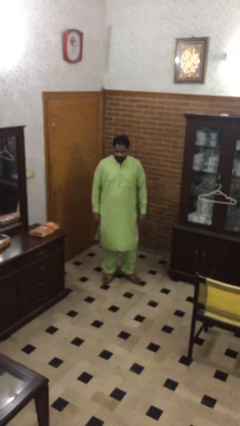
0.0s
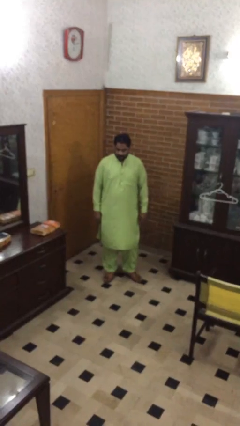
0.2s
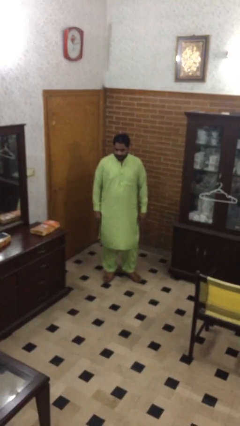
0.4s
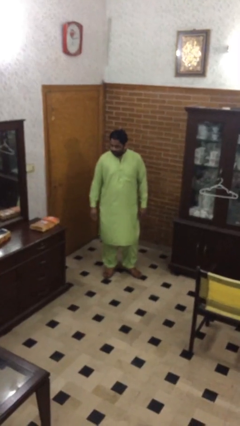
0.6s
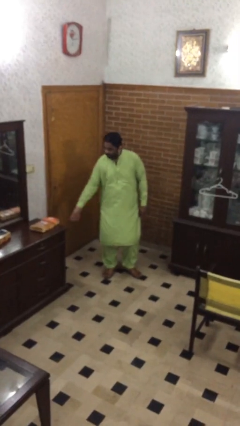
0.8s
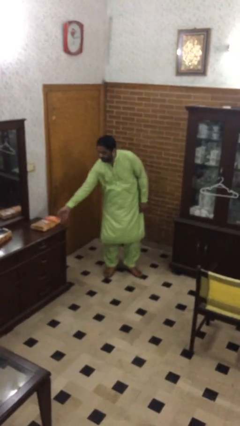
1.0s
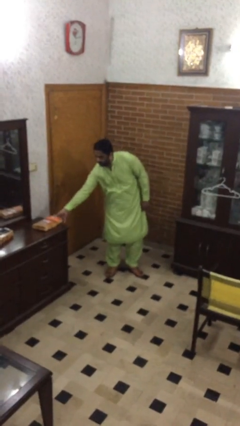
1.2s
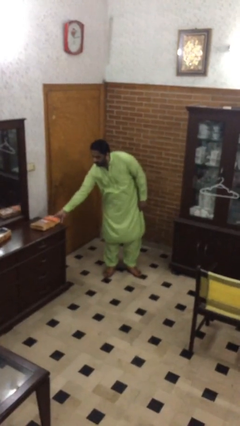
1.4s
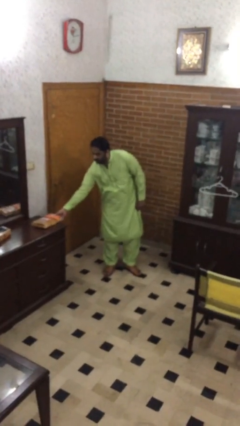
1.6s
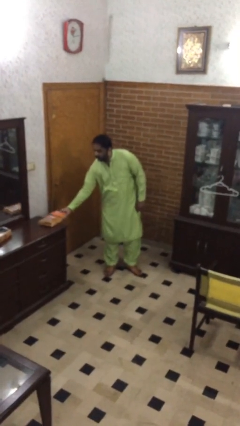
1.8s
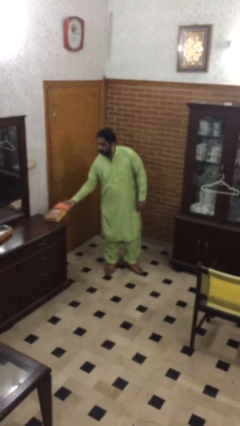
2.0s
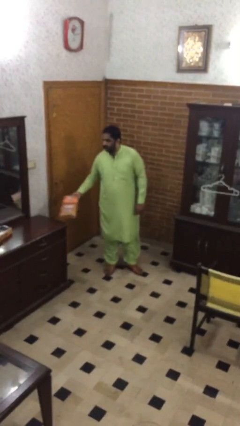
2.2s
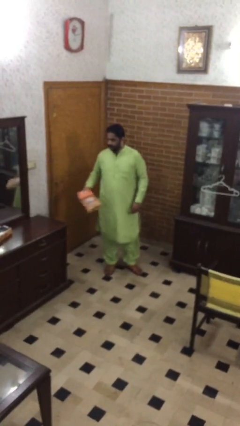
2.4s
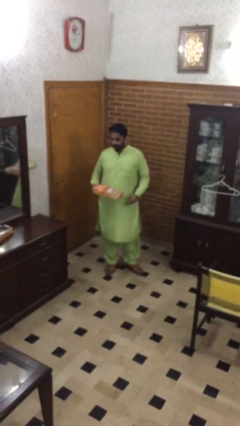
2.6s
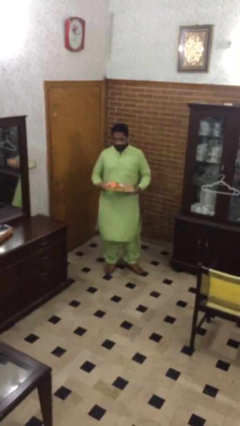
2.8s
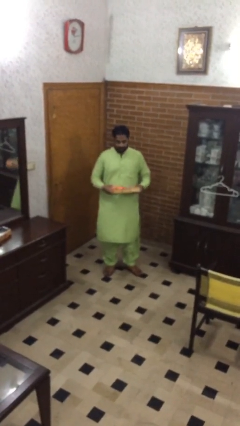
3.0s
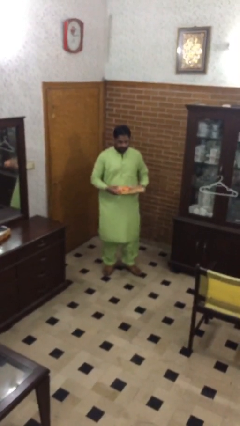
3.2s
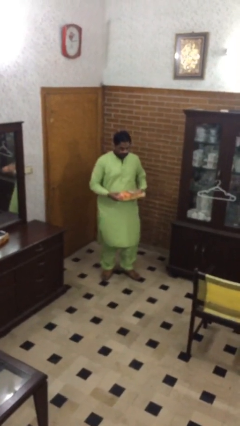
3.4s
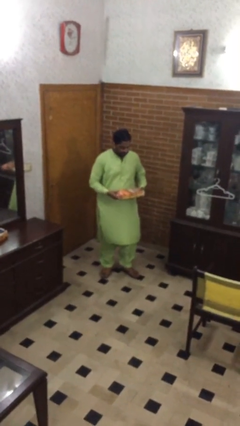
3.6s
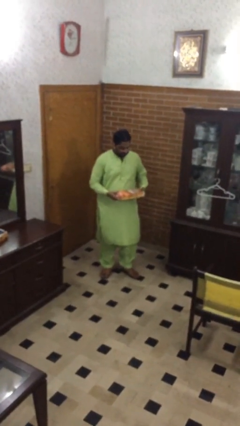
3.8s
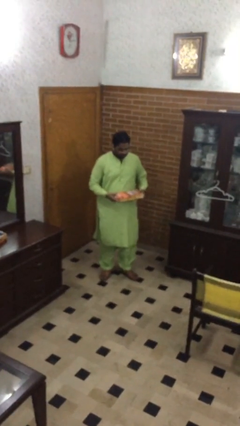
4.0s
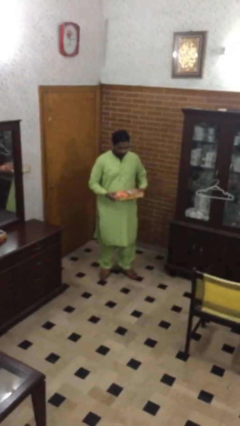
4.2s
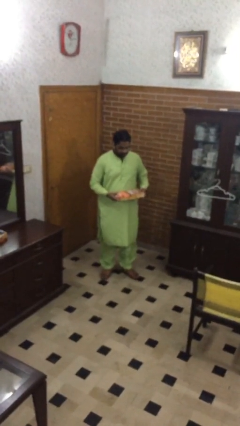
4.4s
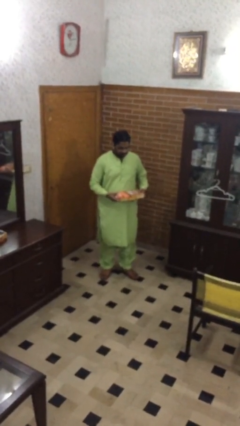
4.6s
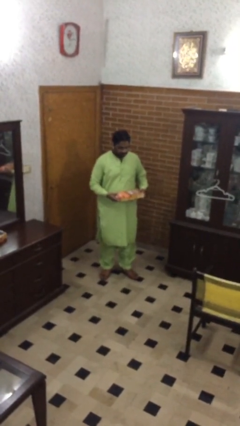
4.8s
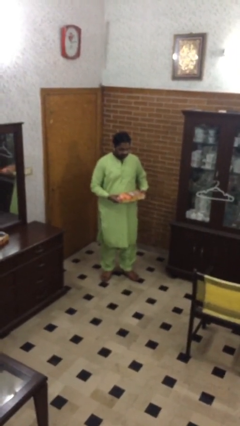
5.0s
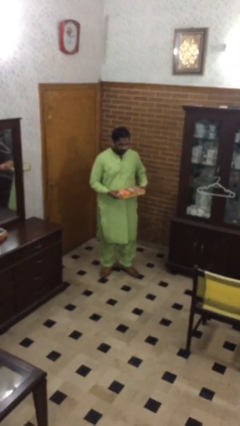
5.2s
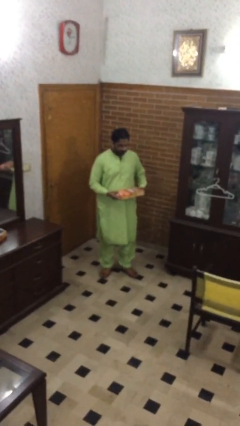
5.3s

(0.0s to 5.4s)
person picks up object from table

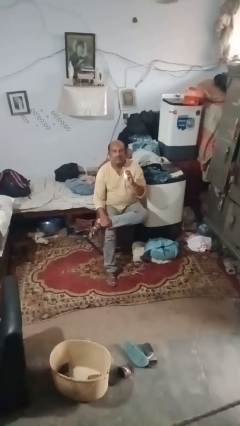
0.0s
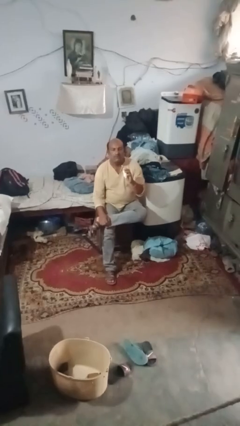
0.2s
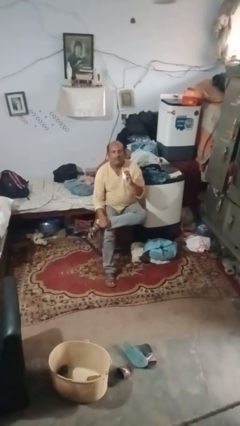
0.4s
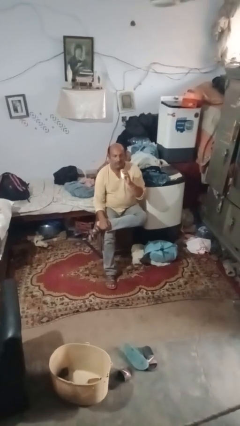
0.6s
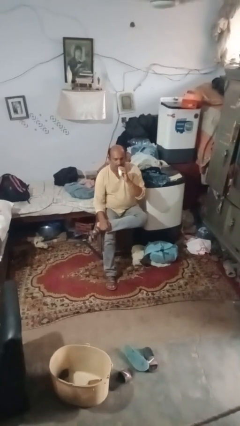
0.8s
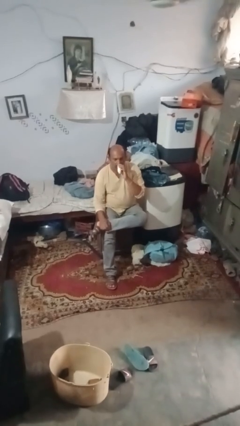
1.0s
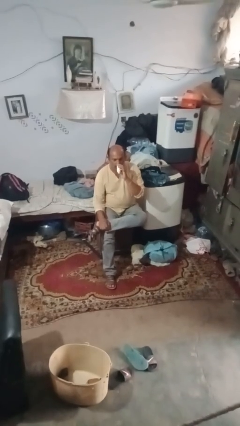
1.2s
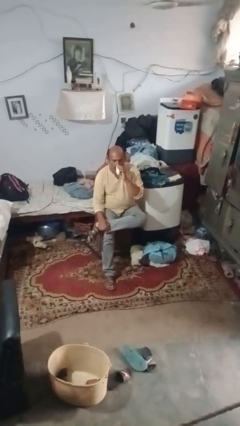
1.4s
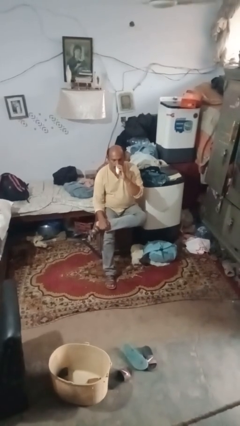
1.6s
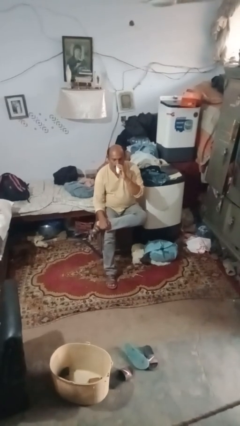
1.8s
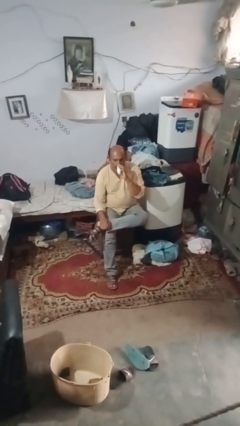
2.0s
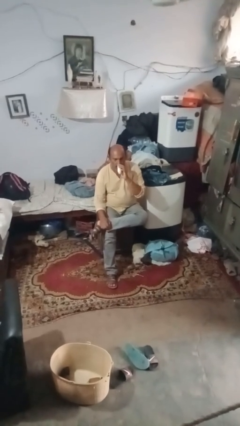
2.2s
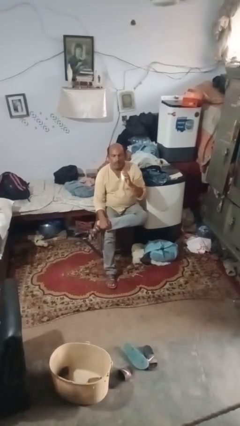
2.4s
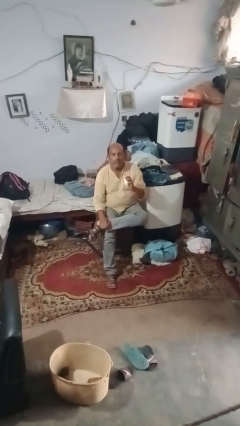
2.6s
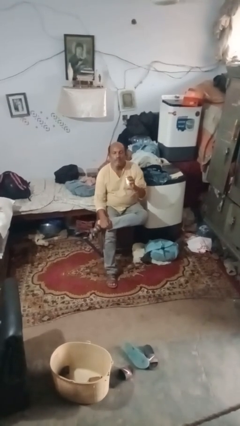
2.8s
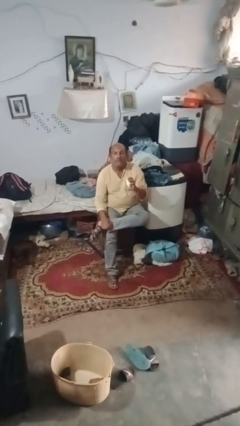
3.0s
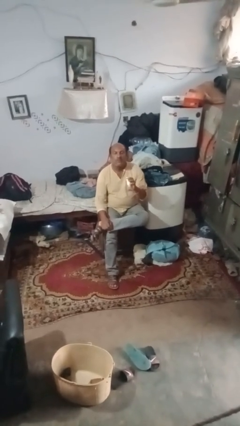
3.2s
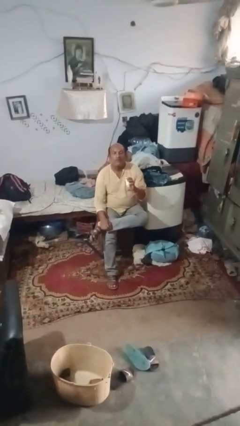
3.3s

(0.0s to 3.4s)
person vapes

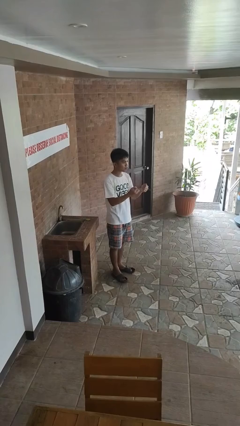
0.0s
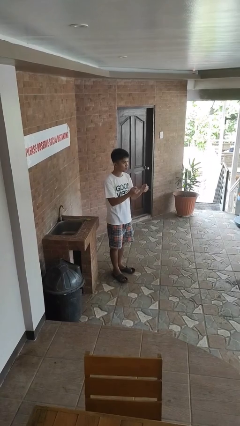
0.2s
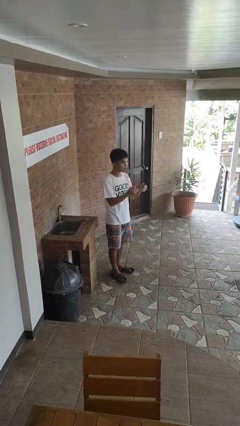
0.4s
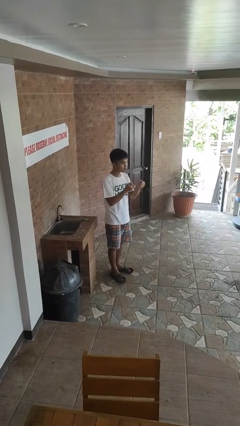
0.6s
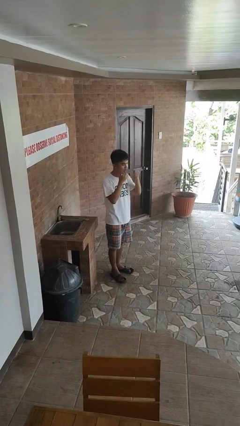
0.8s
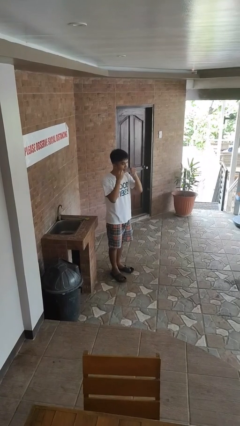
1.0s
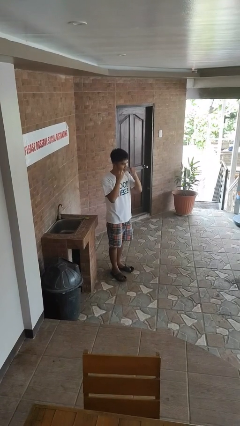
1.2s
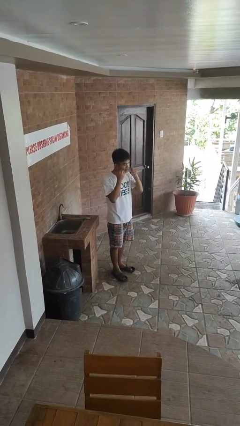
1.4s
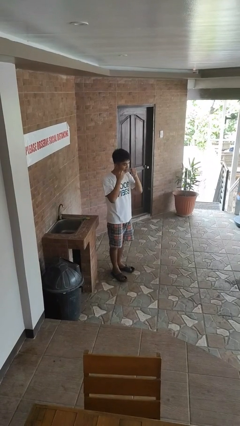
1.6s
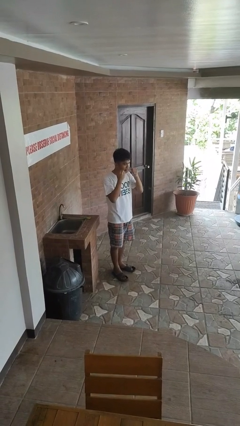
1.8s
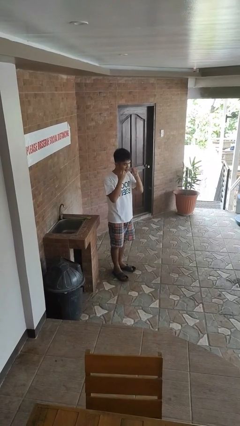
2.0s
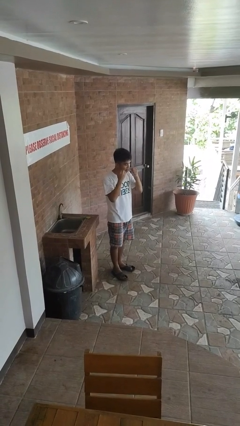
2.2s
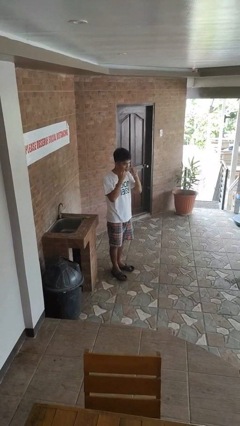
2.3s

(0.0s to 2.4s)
person flosses

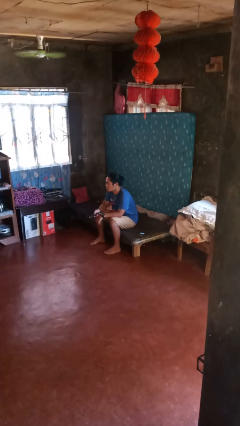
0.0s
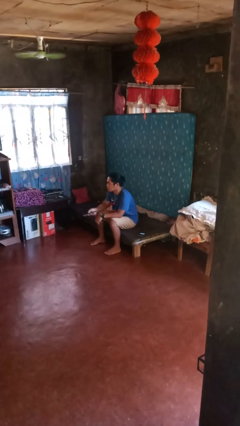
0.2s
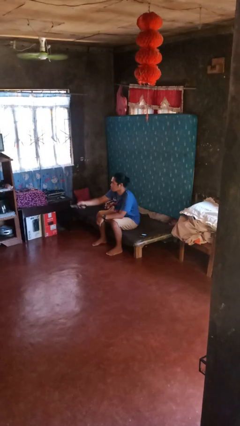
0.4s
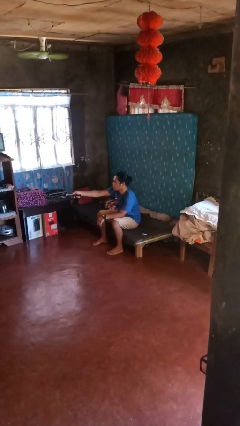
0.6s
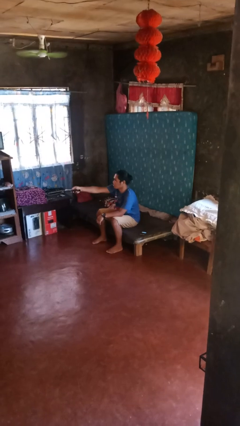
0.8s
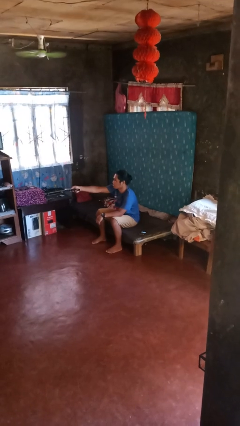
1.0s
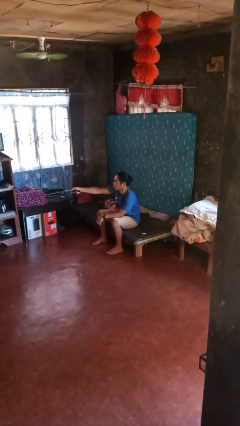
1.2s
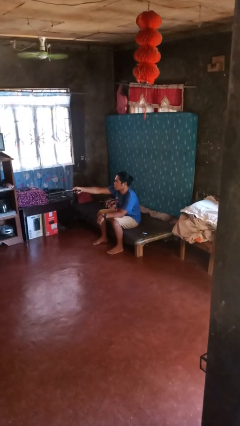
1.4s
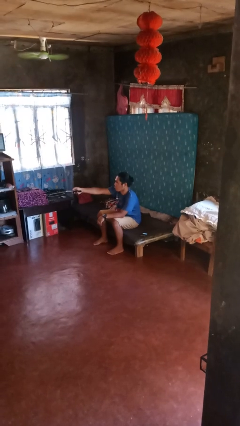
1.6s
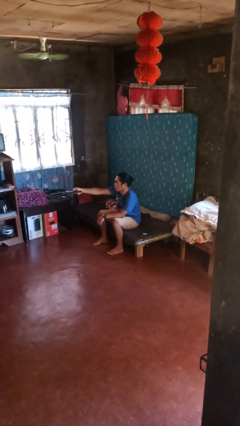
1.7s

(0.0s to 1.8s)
person uses television remote

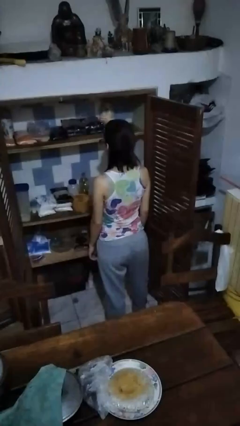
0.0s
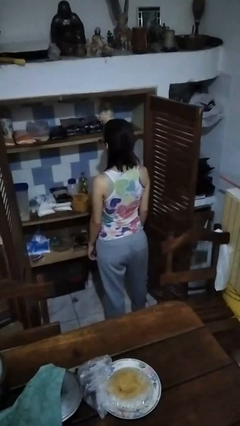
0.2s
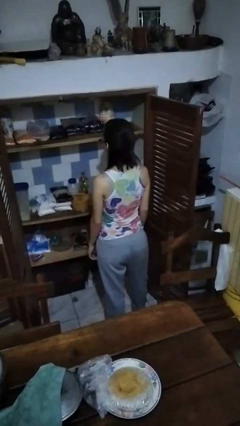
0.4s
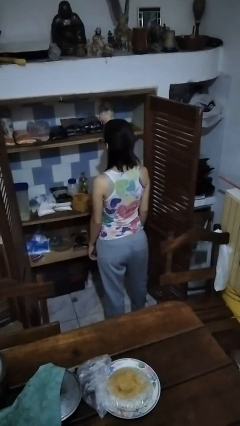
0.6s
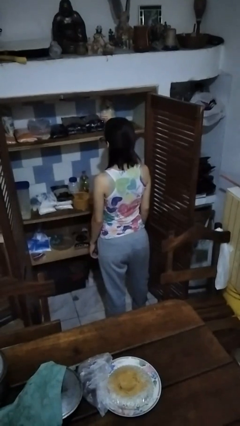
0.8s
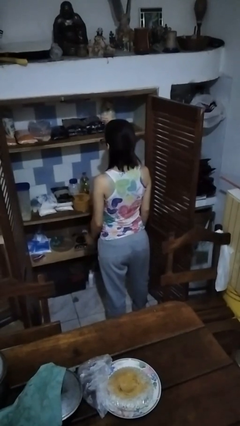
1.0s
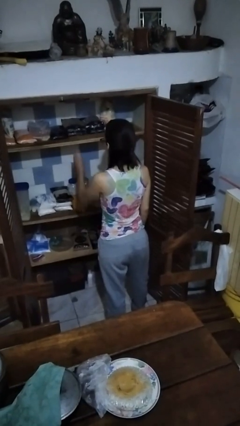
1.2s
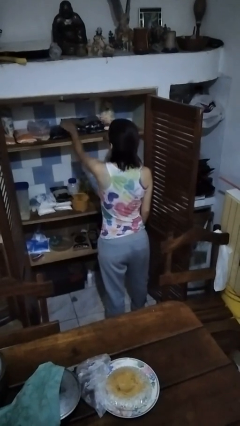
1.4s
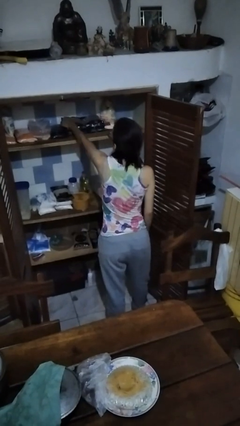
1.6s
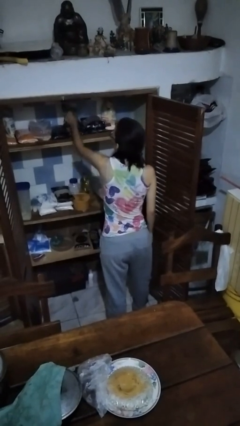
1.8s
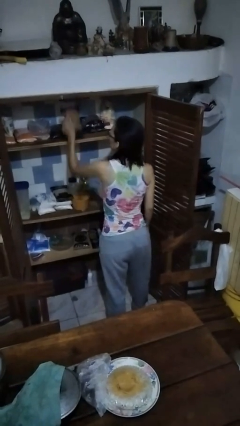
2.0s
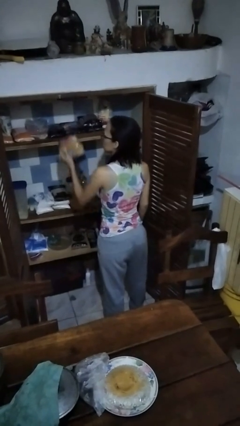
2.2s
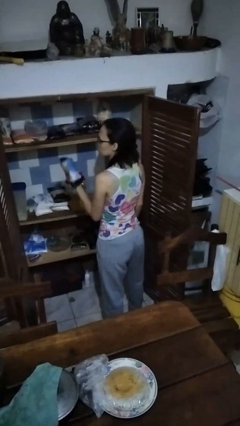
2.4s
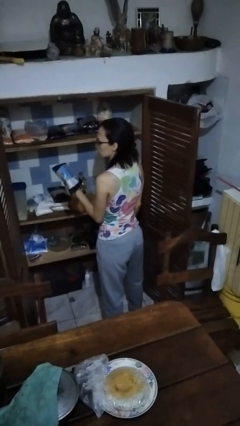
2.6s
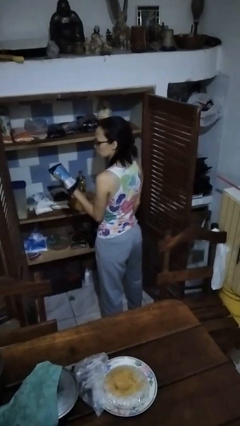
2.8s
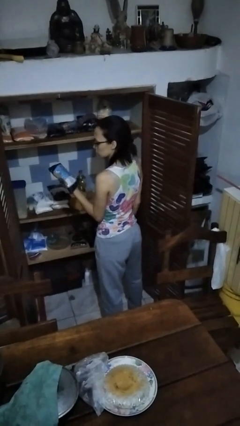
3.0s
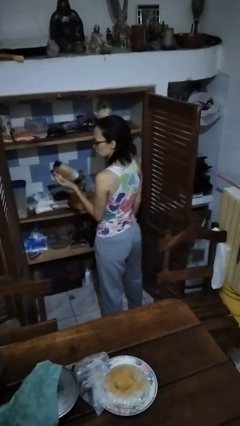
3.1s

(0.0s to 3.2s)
person takes object from cabinet

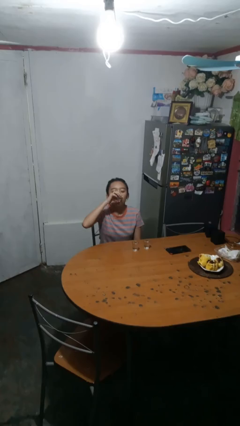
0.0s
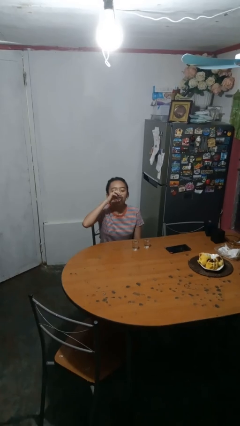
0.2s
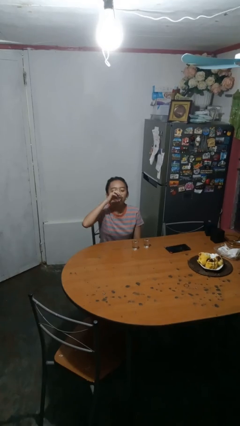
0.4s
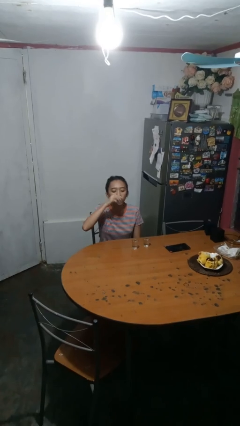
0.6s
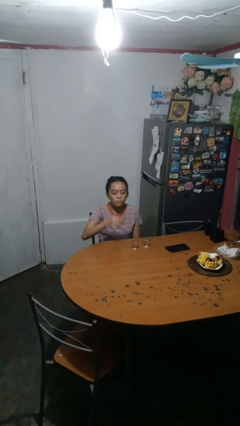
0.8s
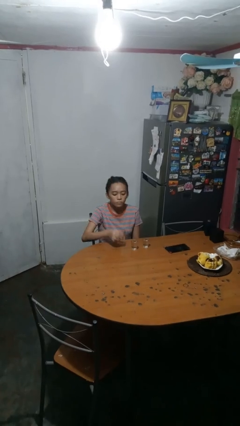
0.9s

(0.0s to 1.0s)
person puts down object on table
